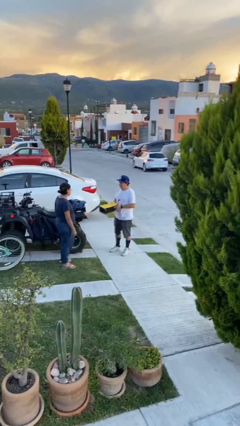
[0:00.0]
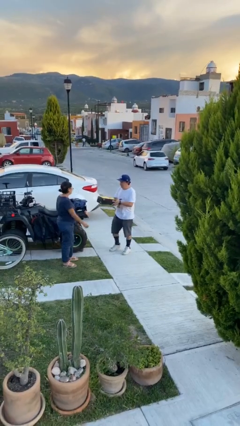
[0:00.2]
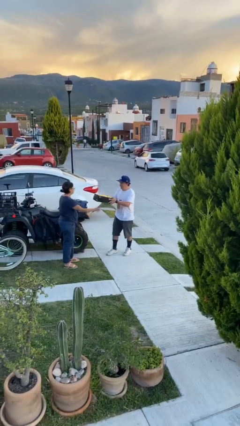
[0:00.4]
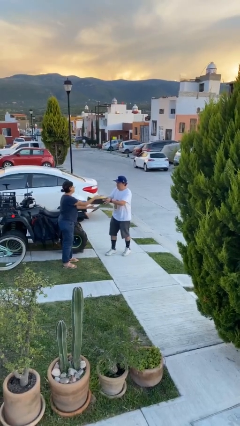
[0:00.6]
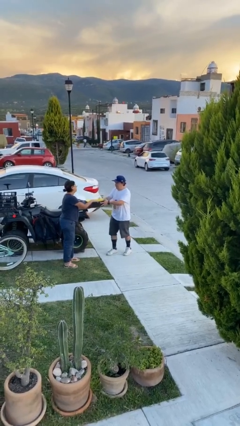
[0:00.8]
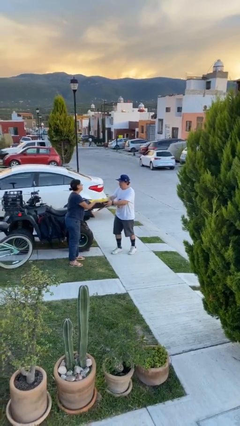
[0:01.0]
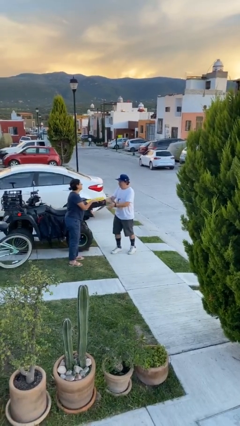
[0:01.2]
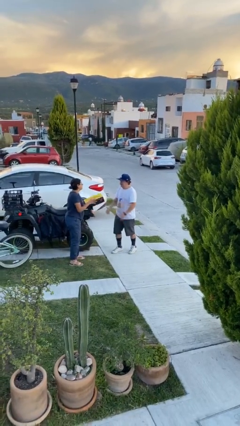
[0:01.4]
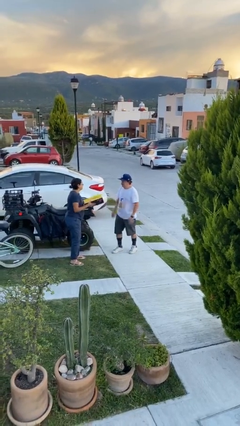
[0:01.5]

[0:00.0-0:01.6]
person shakes hand

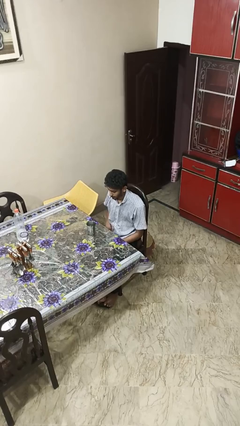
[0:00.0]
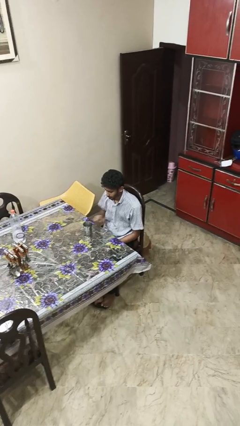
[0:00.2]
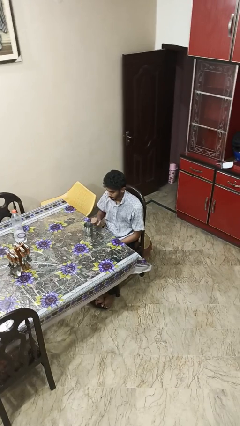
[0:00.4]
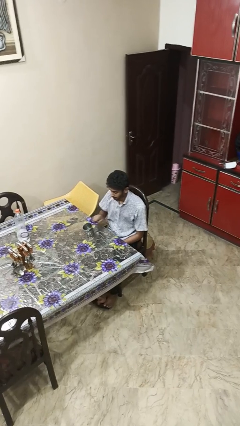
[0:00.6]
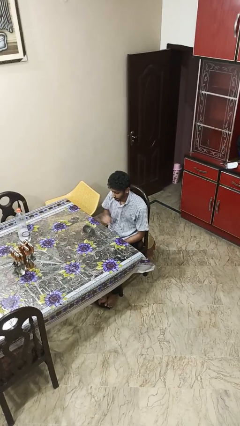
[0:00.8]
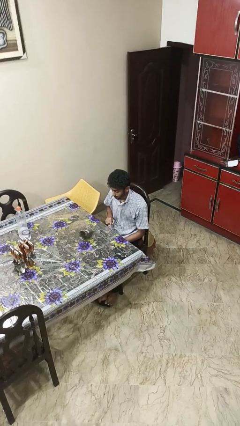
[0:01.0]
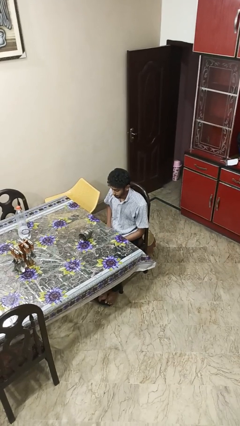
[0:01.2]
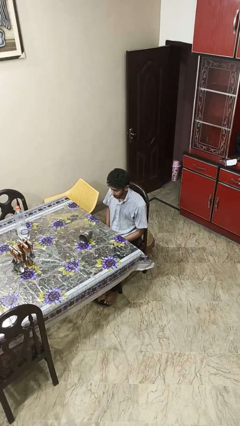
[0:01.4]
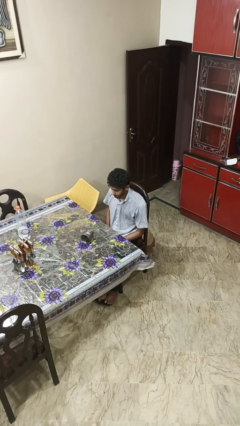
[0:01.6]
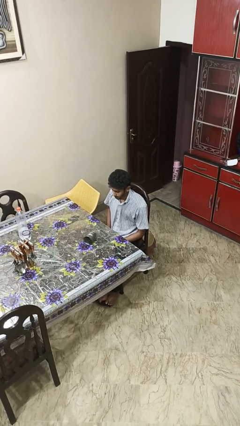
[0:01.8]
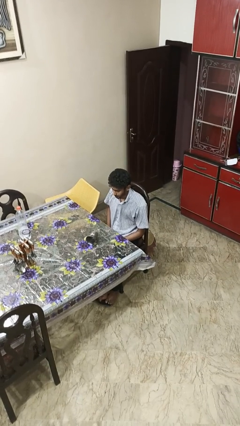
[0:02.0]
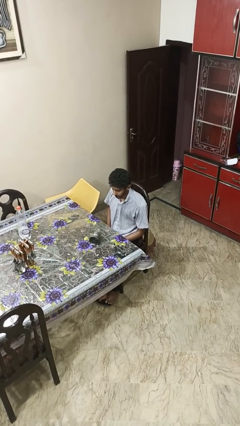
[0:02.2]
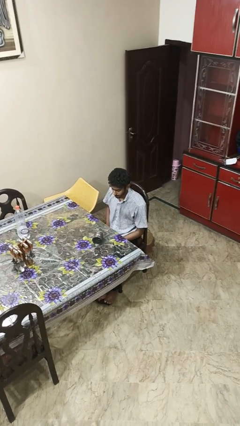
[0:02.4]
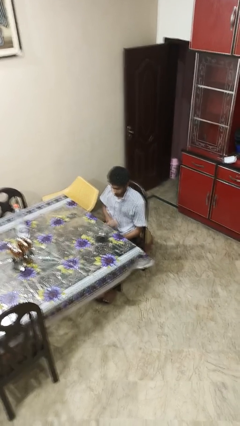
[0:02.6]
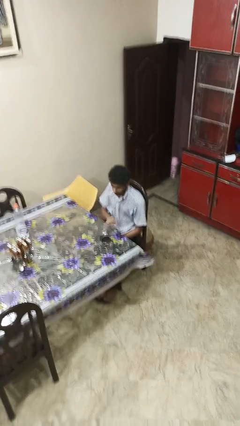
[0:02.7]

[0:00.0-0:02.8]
person knocks over glass

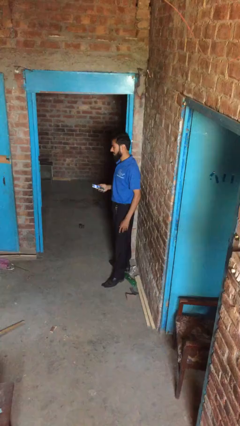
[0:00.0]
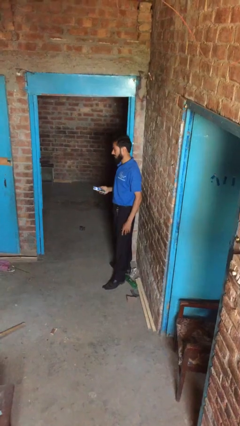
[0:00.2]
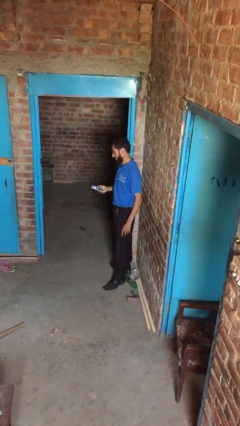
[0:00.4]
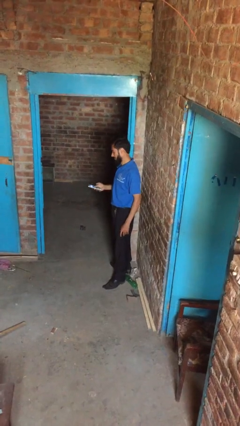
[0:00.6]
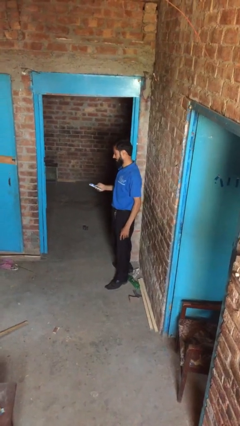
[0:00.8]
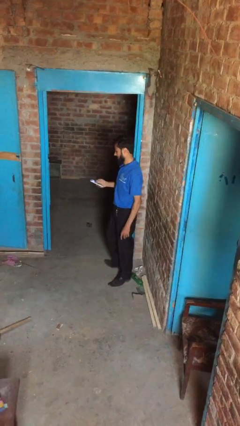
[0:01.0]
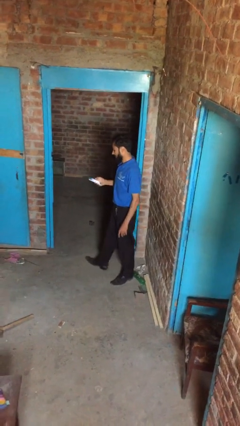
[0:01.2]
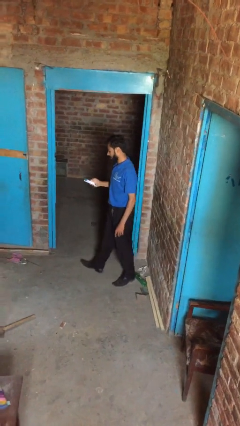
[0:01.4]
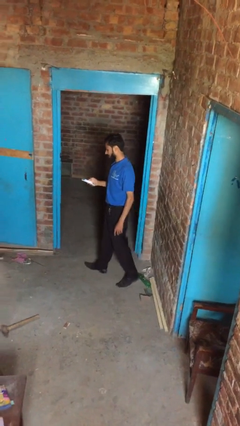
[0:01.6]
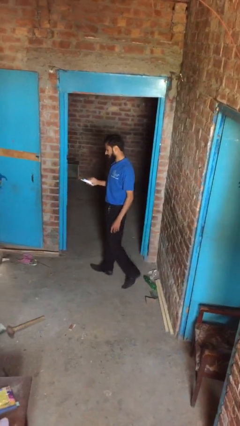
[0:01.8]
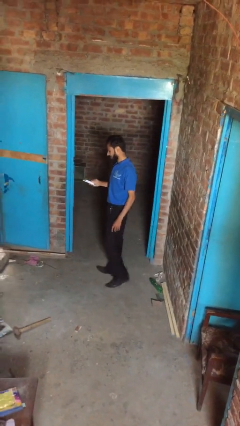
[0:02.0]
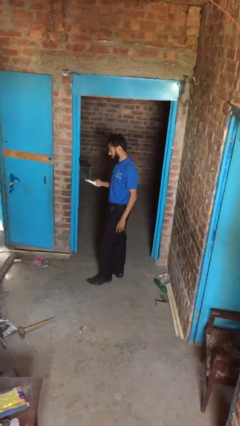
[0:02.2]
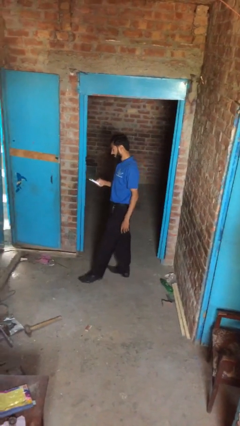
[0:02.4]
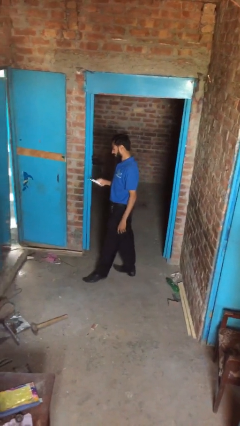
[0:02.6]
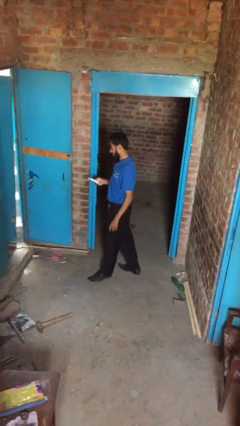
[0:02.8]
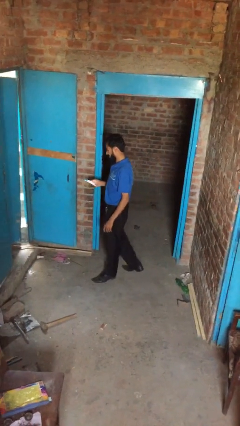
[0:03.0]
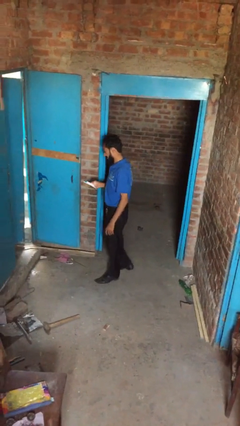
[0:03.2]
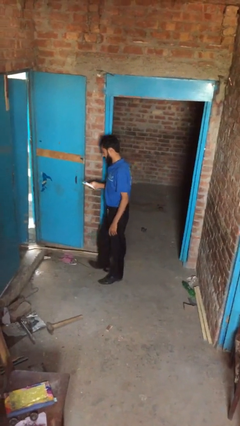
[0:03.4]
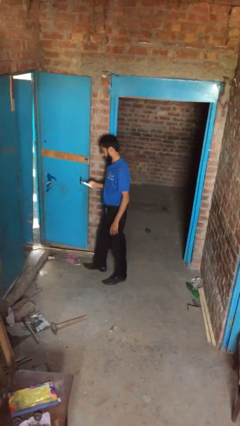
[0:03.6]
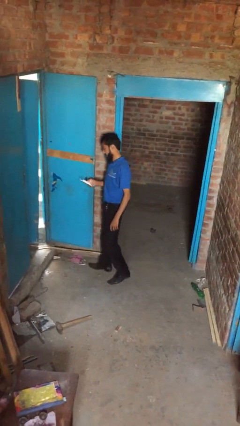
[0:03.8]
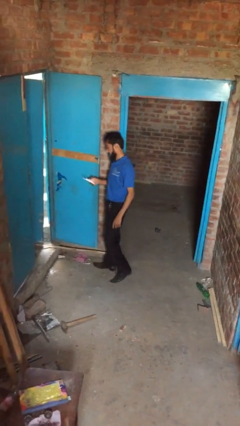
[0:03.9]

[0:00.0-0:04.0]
person texts on phone

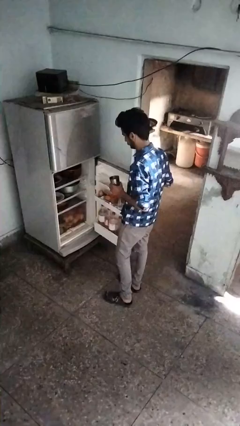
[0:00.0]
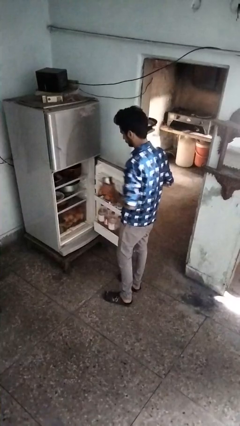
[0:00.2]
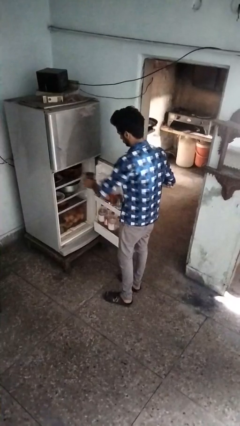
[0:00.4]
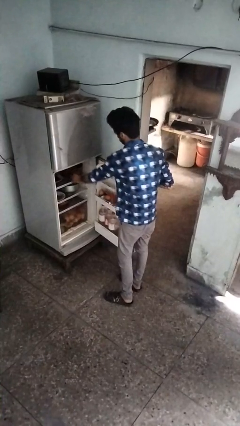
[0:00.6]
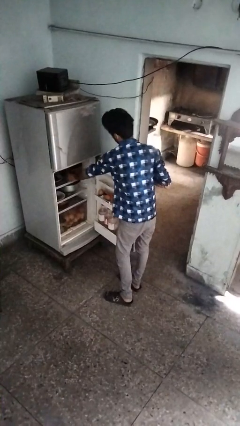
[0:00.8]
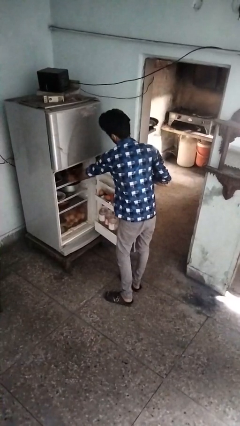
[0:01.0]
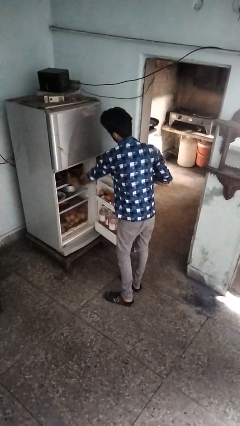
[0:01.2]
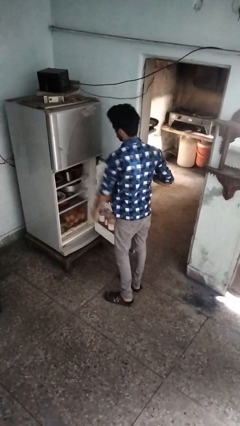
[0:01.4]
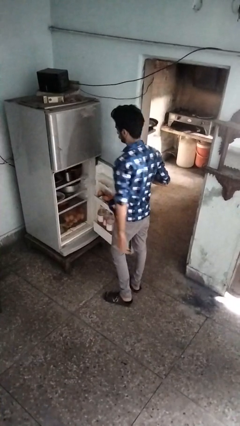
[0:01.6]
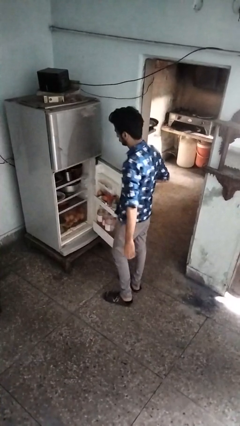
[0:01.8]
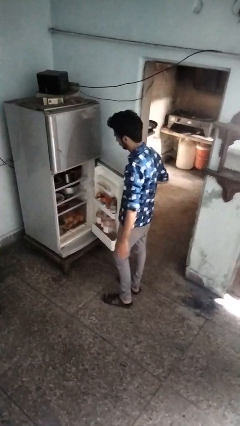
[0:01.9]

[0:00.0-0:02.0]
person puts object into refrigerator

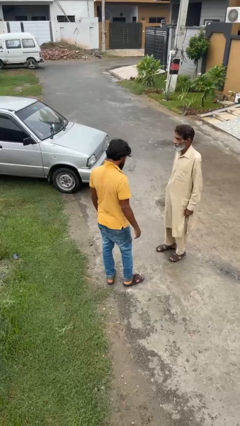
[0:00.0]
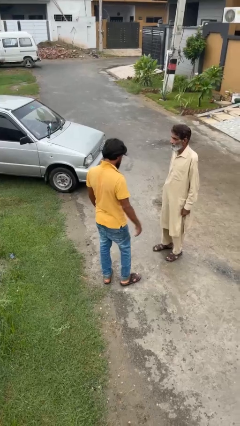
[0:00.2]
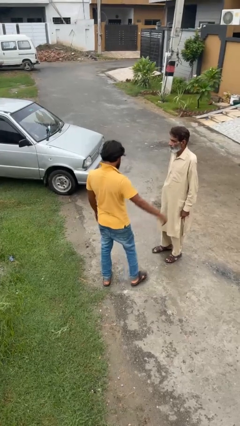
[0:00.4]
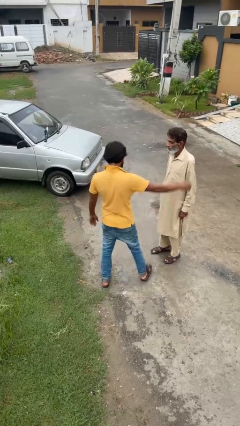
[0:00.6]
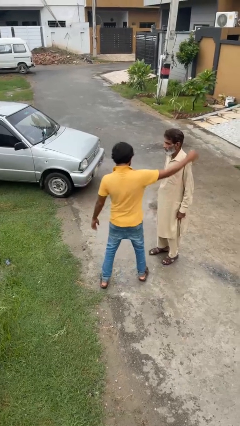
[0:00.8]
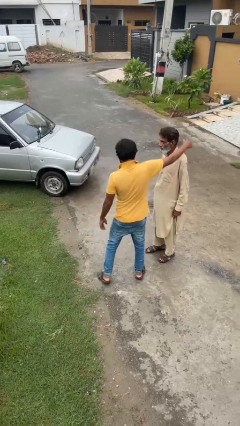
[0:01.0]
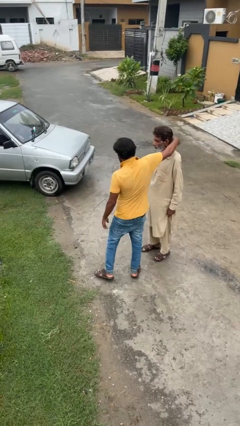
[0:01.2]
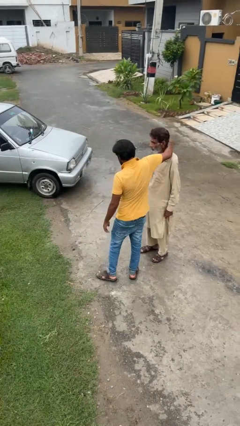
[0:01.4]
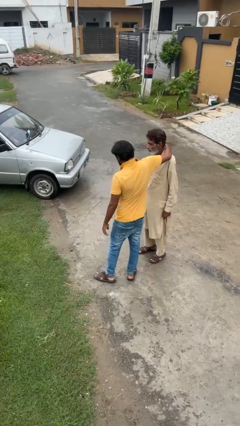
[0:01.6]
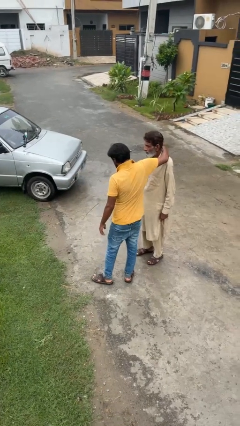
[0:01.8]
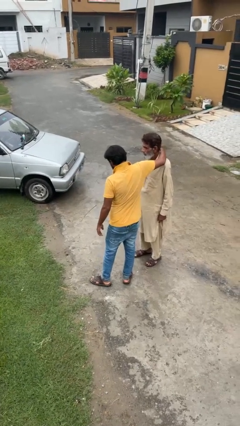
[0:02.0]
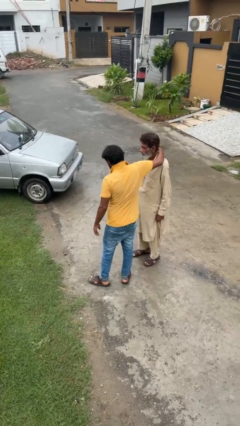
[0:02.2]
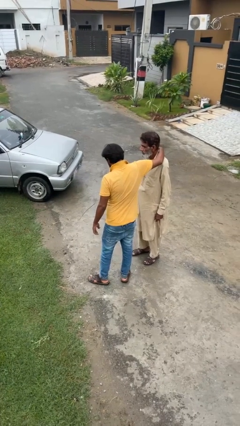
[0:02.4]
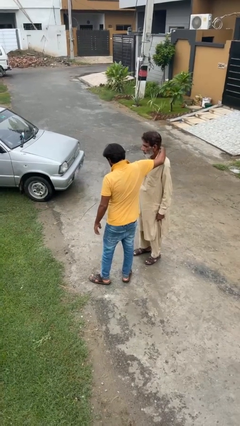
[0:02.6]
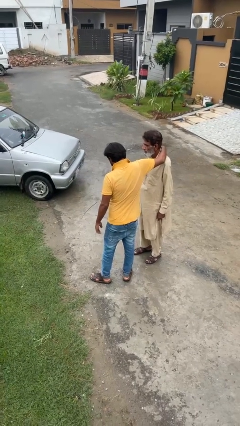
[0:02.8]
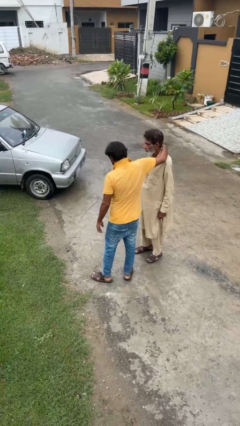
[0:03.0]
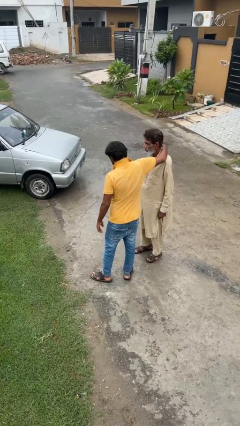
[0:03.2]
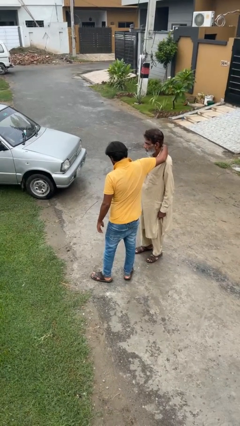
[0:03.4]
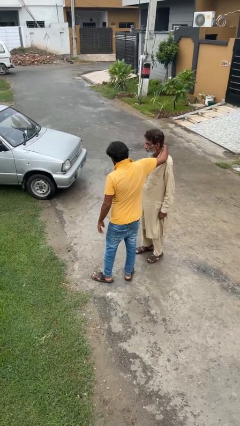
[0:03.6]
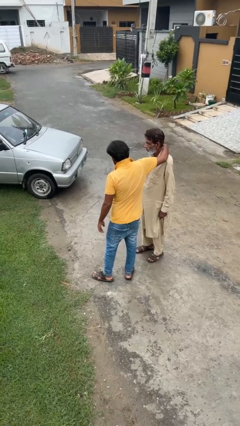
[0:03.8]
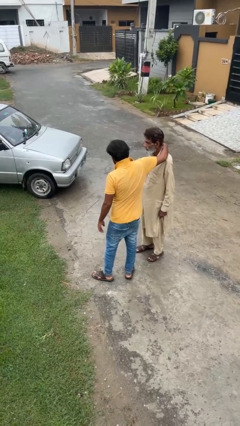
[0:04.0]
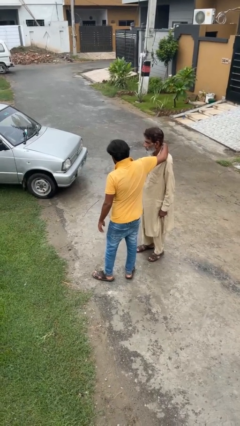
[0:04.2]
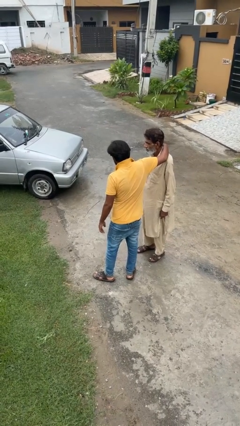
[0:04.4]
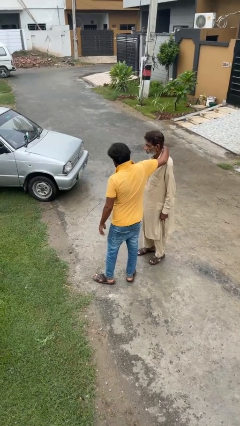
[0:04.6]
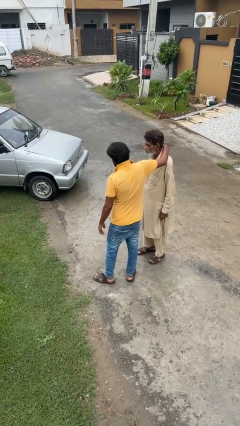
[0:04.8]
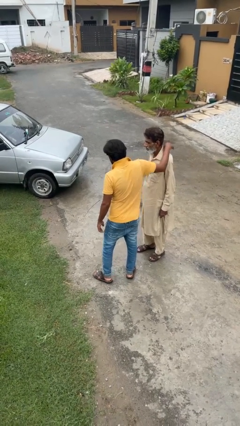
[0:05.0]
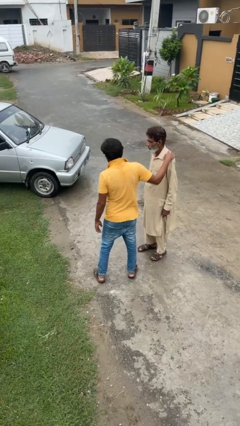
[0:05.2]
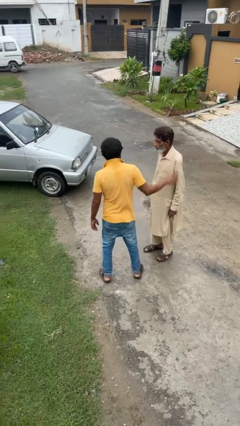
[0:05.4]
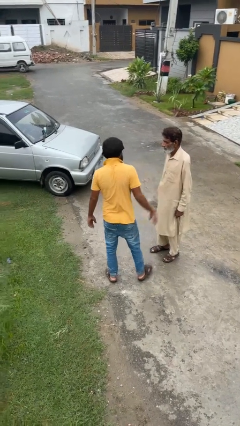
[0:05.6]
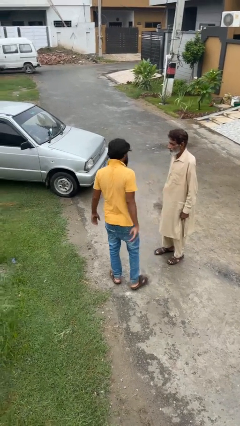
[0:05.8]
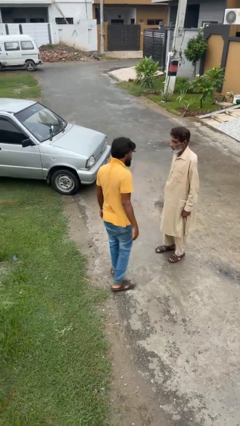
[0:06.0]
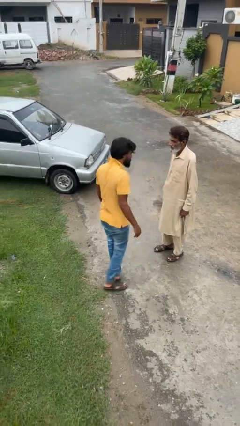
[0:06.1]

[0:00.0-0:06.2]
person pounds shoulders of person

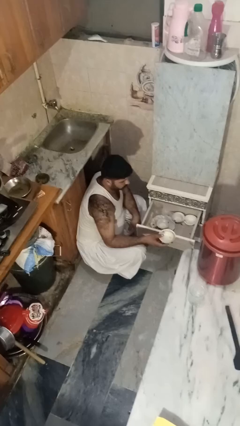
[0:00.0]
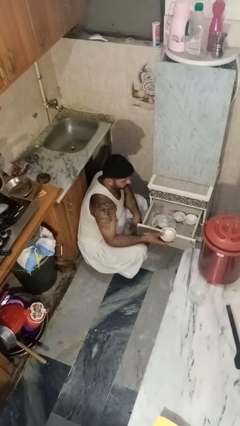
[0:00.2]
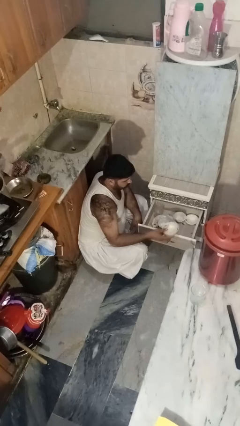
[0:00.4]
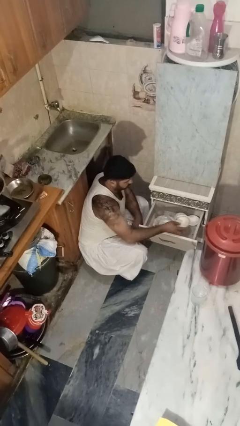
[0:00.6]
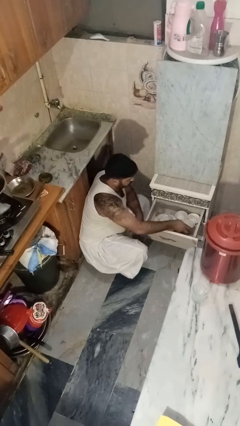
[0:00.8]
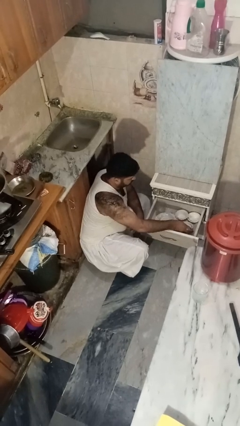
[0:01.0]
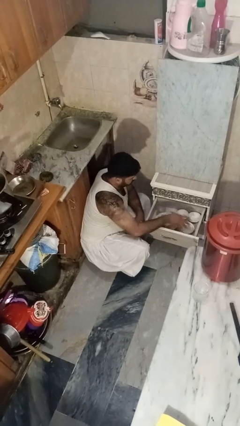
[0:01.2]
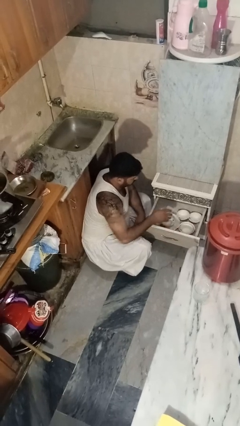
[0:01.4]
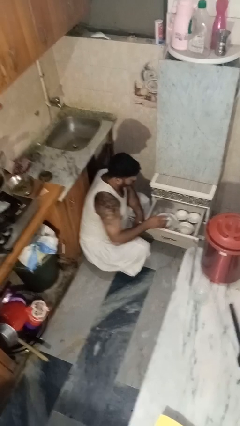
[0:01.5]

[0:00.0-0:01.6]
person puts object into kitchen drawer
